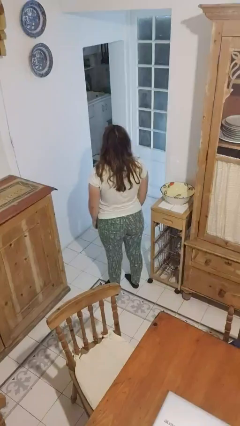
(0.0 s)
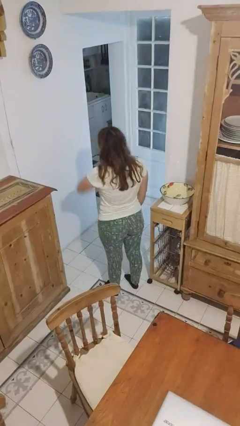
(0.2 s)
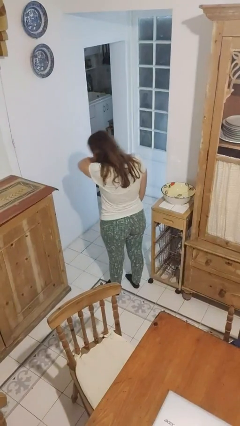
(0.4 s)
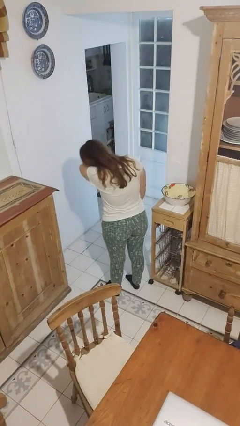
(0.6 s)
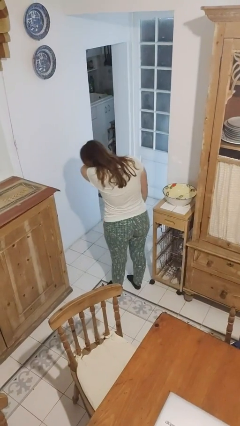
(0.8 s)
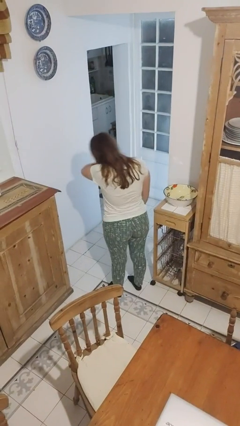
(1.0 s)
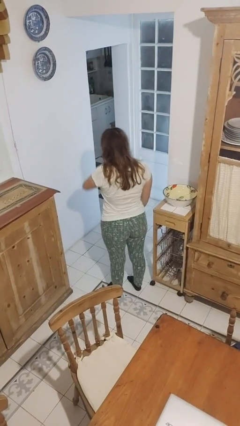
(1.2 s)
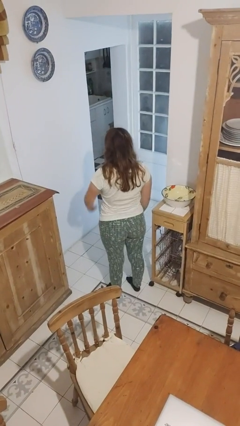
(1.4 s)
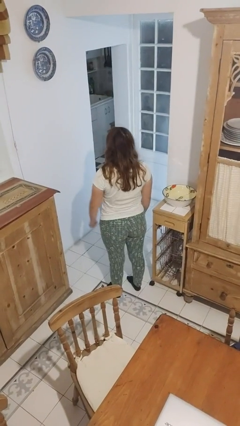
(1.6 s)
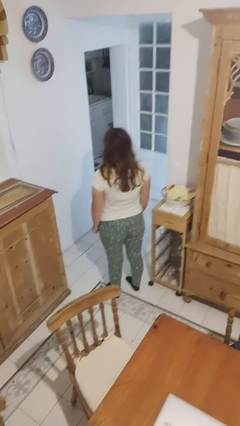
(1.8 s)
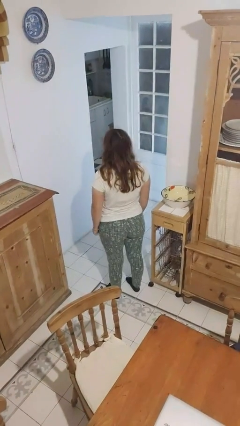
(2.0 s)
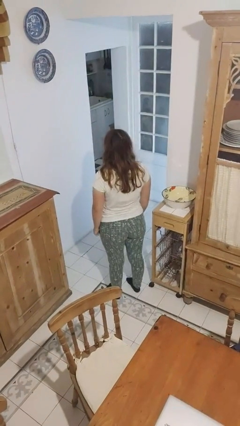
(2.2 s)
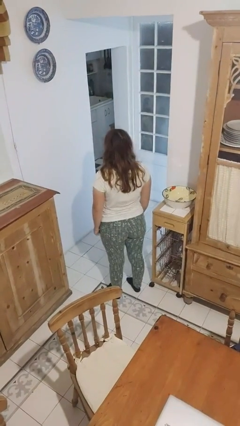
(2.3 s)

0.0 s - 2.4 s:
person sneezes into arm

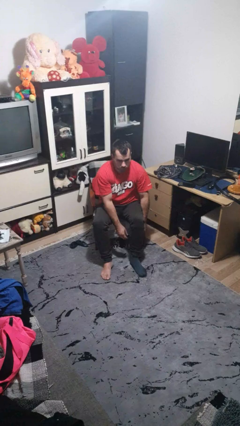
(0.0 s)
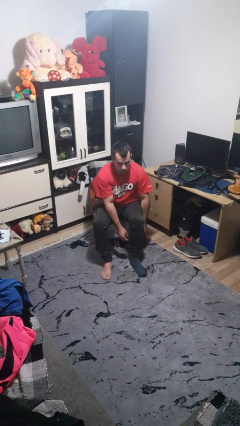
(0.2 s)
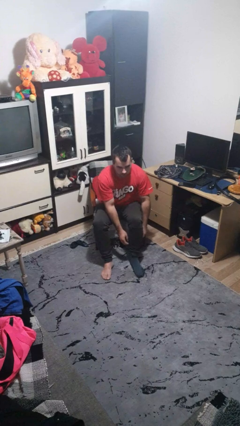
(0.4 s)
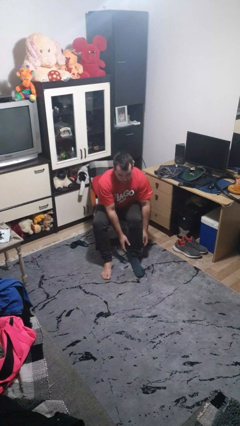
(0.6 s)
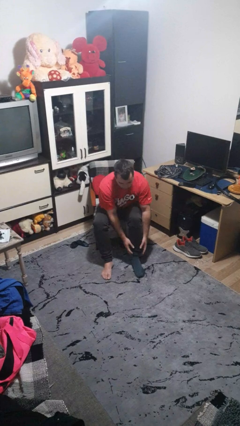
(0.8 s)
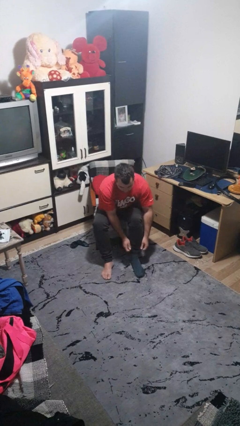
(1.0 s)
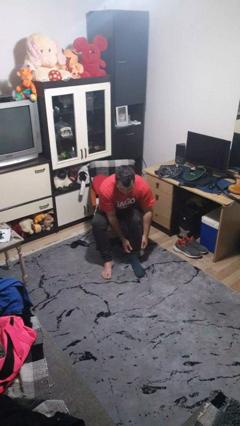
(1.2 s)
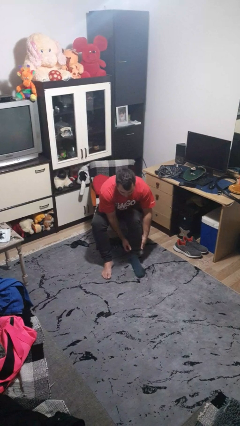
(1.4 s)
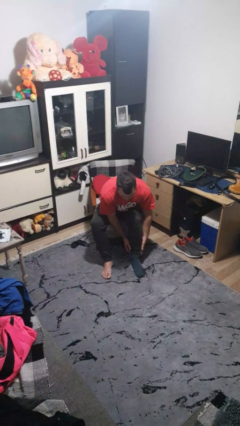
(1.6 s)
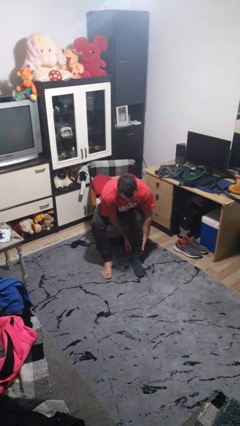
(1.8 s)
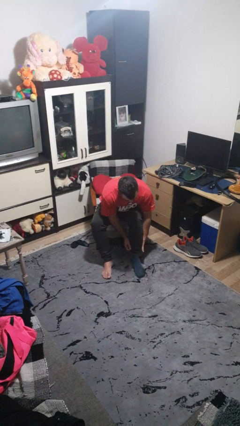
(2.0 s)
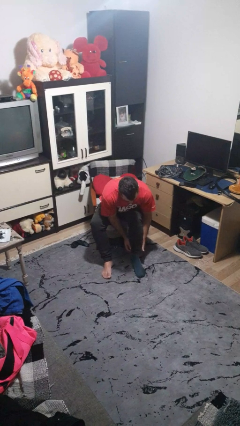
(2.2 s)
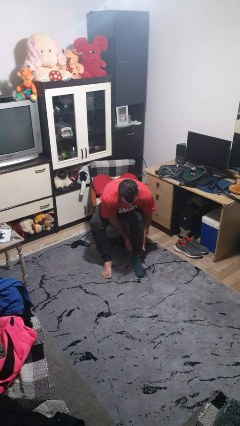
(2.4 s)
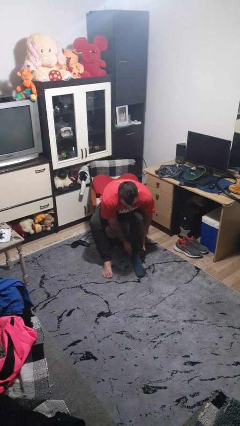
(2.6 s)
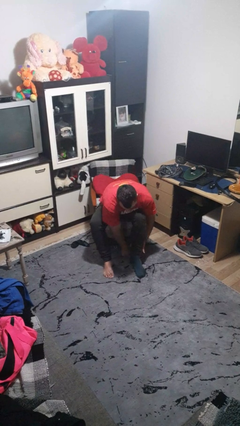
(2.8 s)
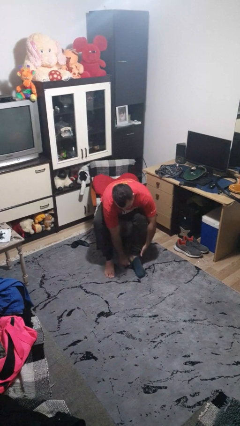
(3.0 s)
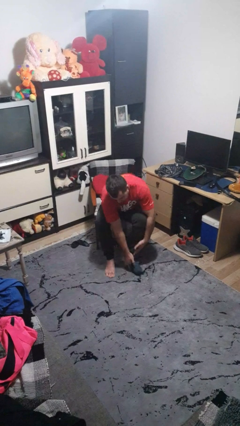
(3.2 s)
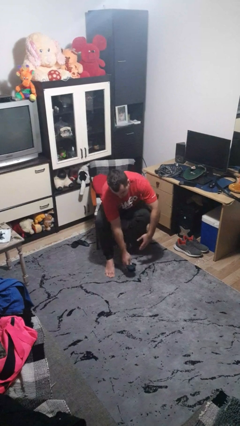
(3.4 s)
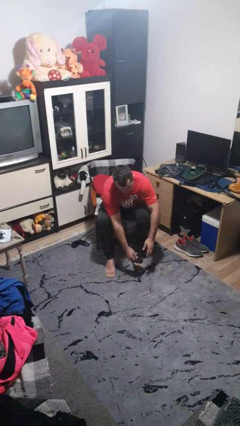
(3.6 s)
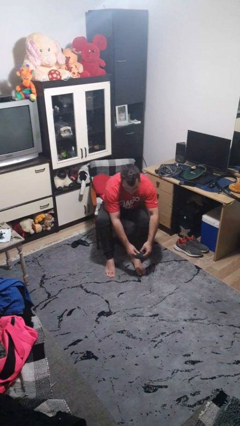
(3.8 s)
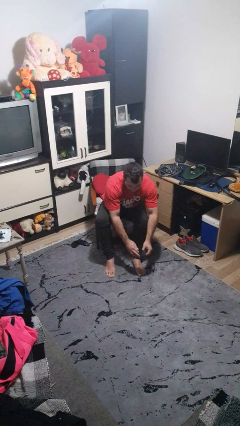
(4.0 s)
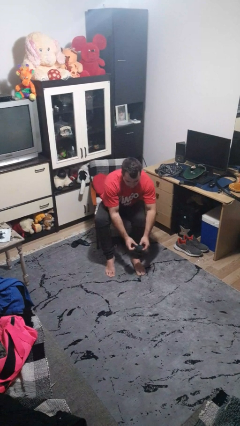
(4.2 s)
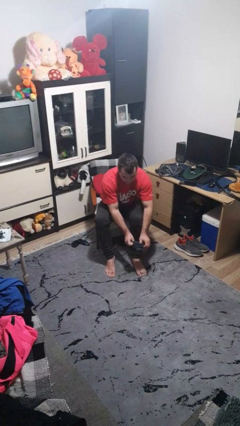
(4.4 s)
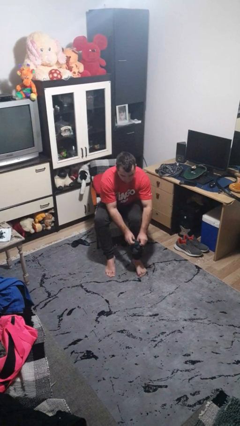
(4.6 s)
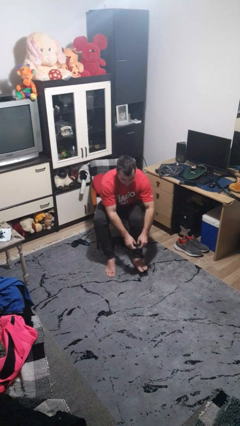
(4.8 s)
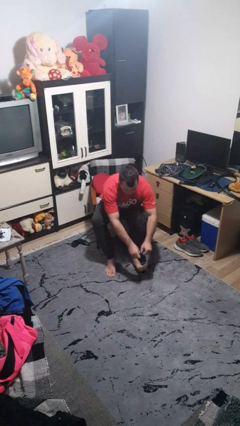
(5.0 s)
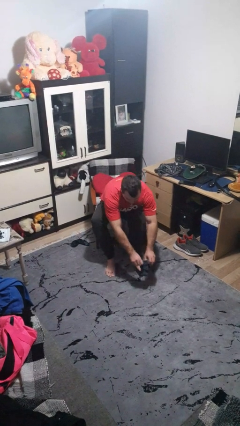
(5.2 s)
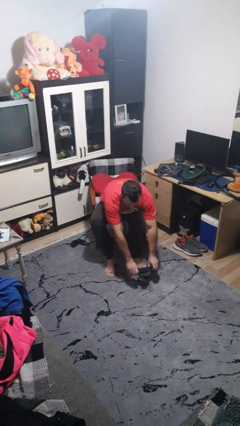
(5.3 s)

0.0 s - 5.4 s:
person takes off socks

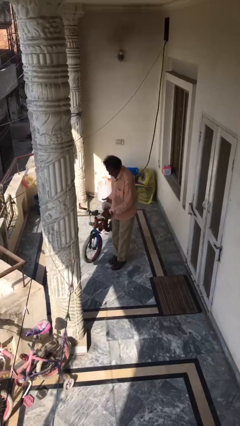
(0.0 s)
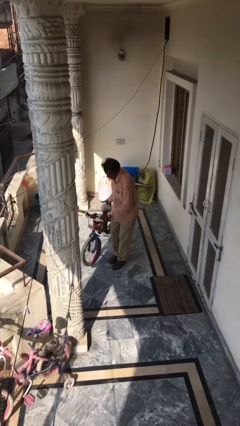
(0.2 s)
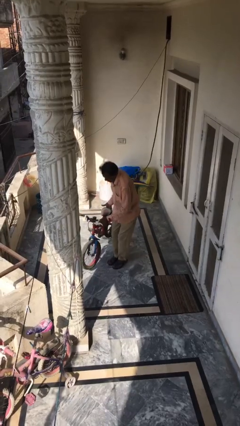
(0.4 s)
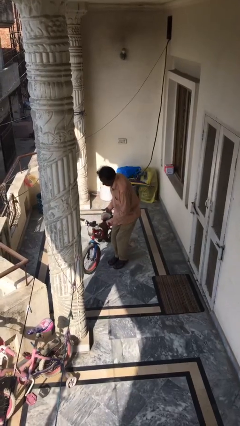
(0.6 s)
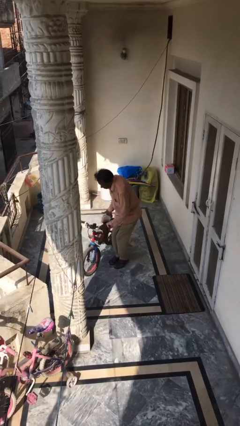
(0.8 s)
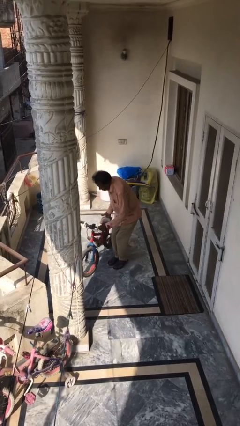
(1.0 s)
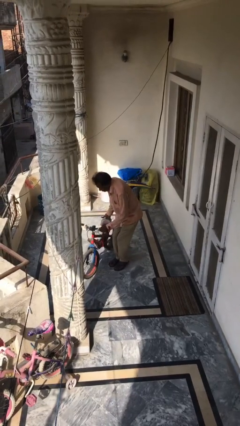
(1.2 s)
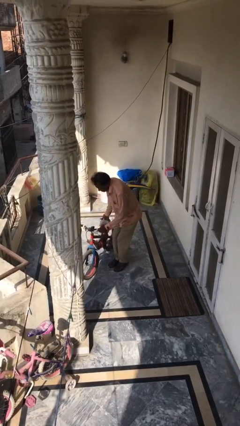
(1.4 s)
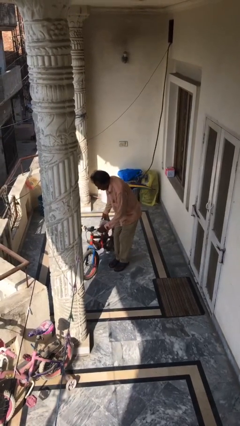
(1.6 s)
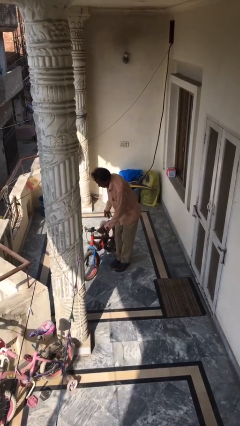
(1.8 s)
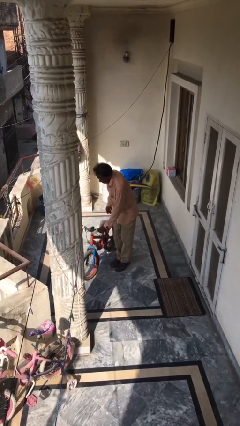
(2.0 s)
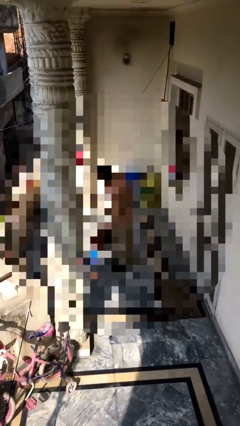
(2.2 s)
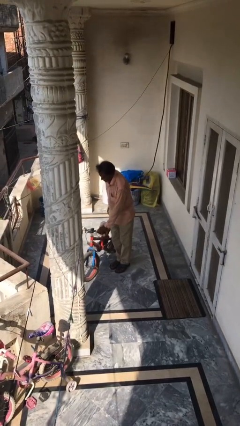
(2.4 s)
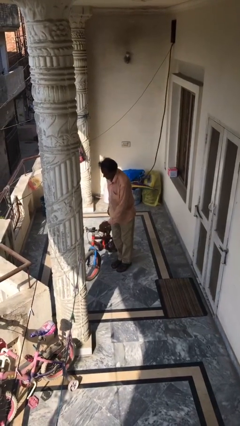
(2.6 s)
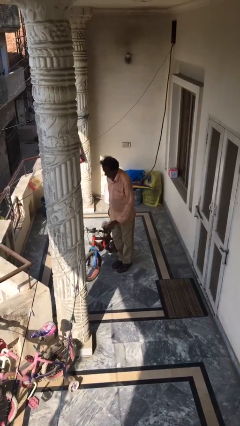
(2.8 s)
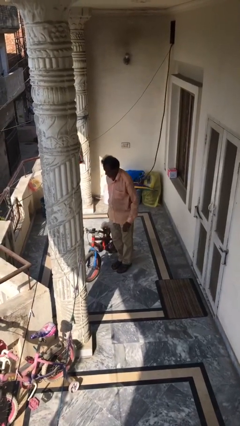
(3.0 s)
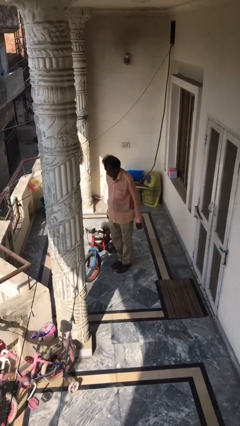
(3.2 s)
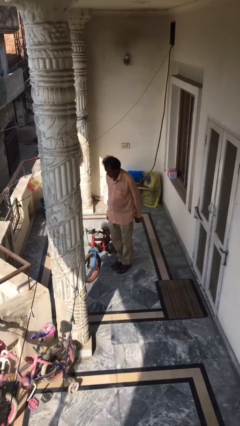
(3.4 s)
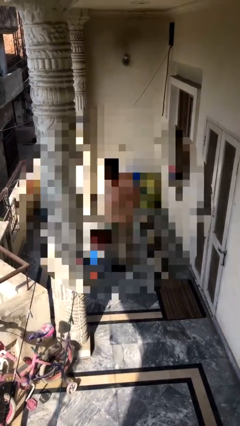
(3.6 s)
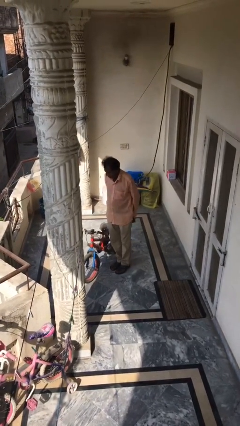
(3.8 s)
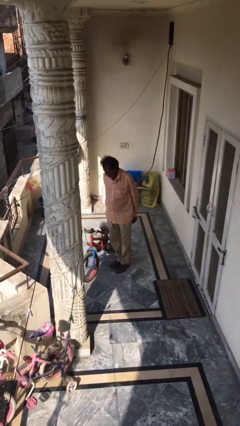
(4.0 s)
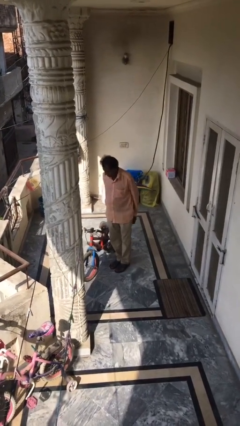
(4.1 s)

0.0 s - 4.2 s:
person puts down object on floor

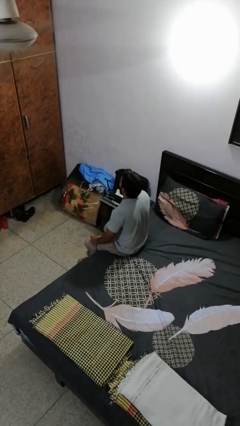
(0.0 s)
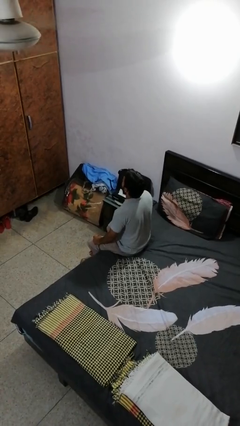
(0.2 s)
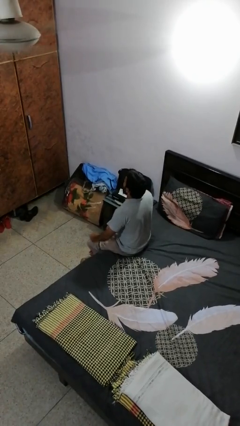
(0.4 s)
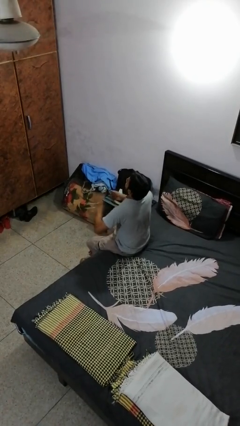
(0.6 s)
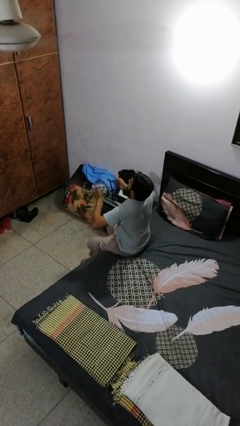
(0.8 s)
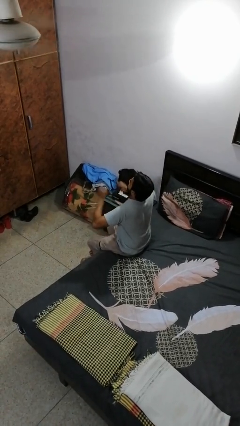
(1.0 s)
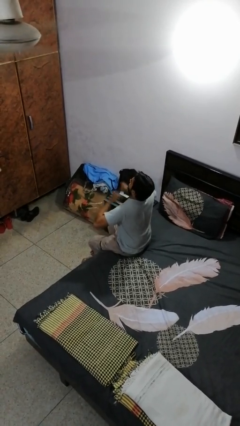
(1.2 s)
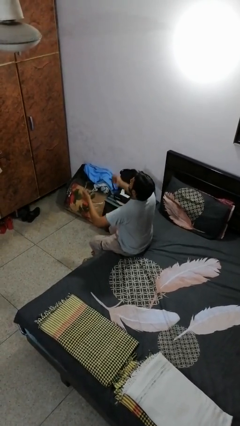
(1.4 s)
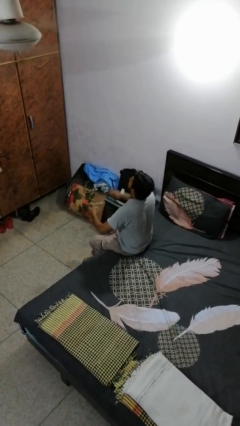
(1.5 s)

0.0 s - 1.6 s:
person drums on chest

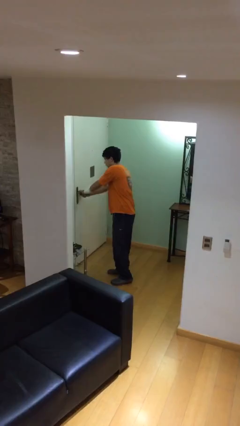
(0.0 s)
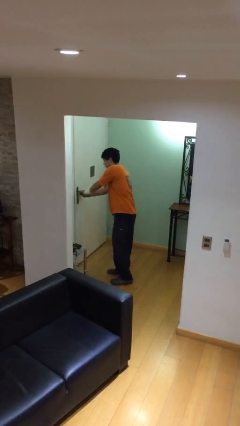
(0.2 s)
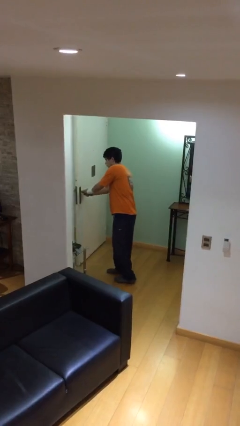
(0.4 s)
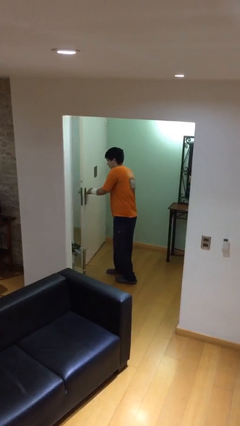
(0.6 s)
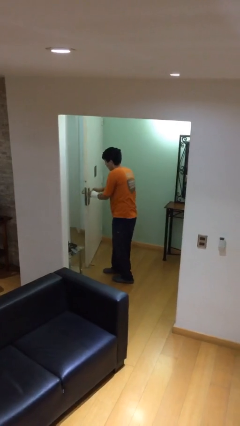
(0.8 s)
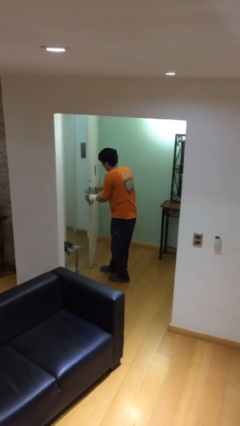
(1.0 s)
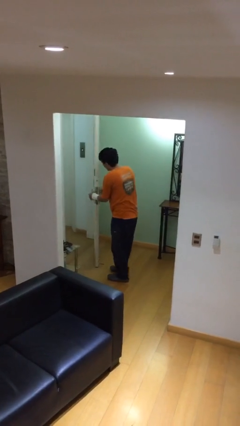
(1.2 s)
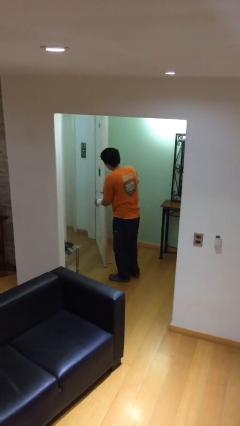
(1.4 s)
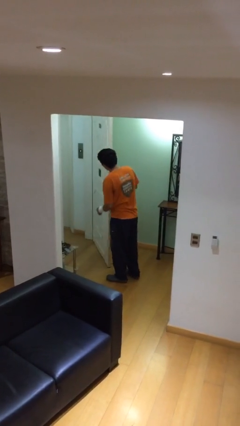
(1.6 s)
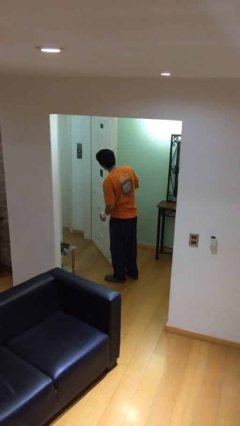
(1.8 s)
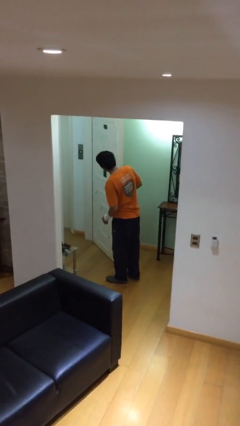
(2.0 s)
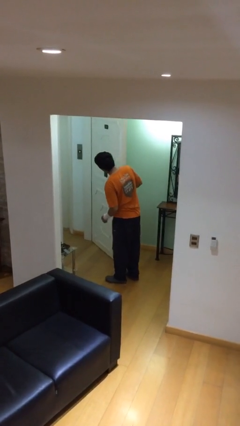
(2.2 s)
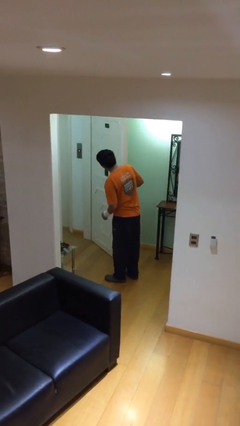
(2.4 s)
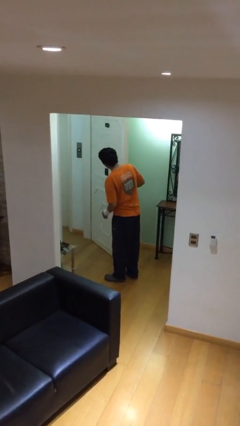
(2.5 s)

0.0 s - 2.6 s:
person opens facility door

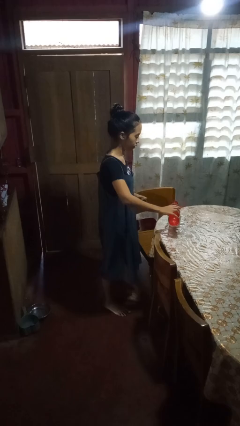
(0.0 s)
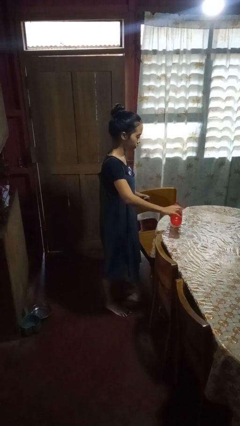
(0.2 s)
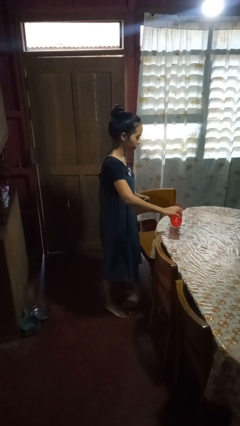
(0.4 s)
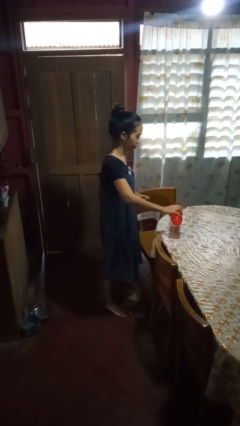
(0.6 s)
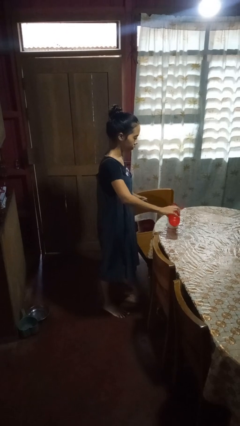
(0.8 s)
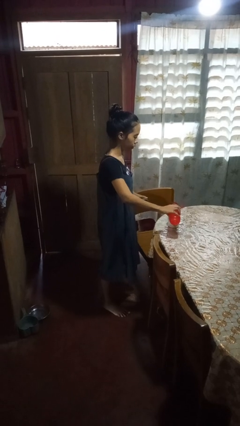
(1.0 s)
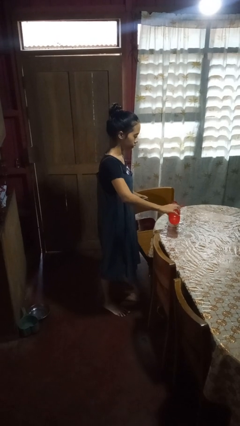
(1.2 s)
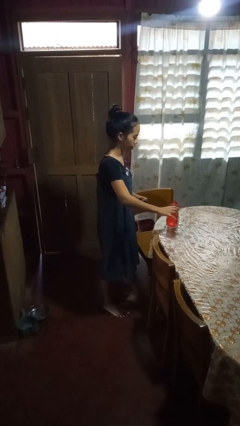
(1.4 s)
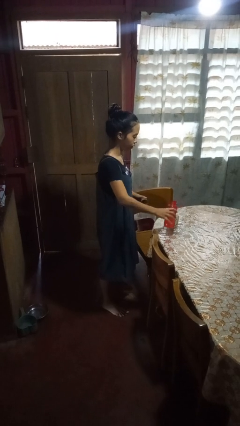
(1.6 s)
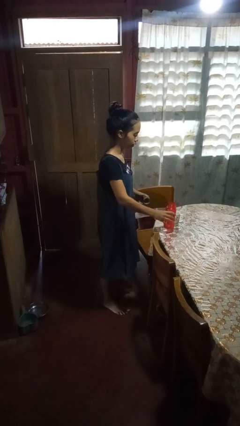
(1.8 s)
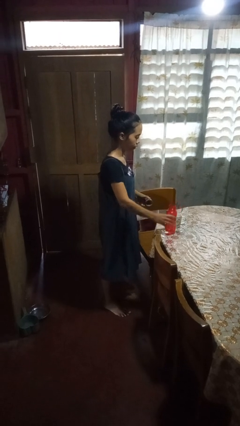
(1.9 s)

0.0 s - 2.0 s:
person pours liquid into cup
